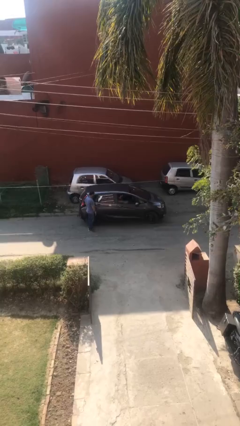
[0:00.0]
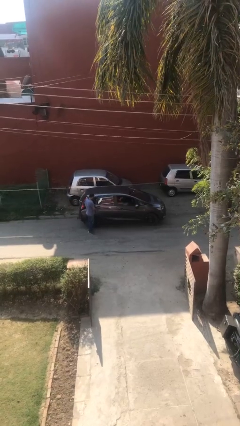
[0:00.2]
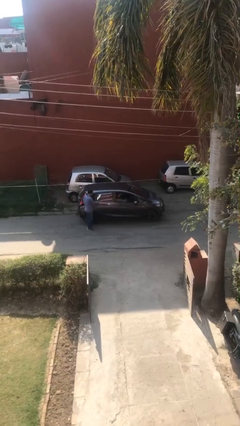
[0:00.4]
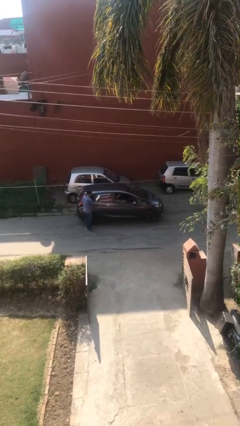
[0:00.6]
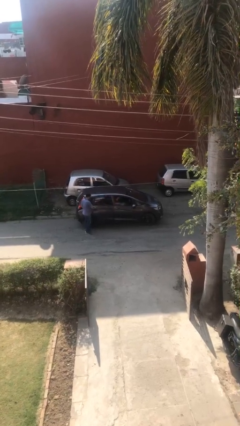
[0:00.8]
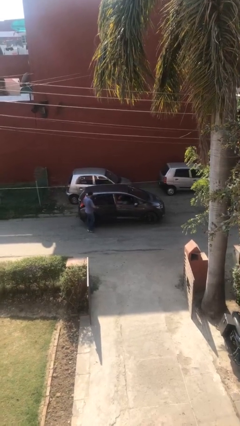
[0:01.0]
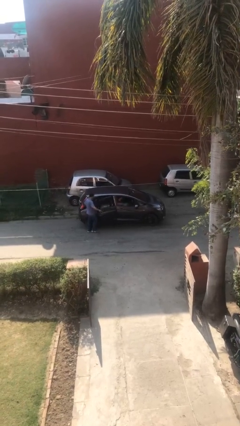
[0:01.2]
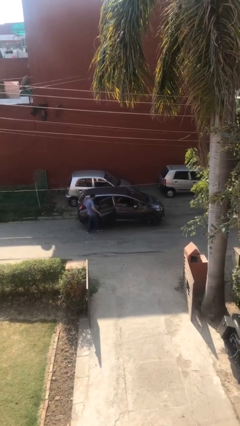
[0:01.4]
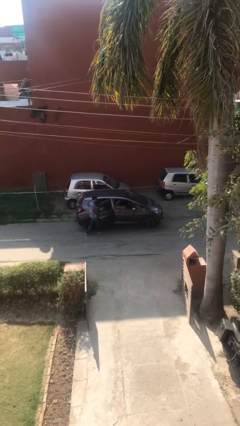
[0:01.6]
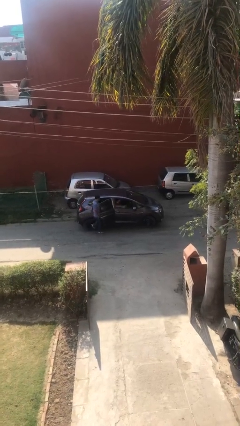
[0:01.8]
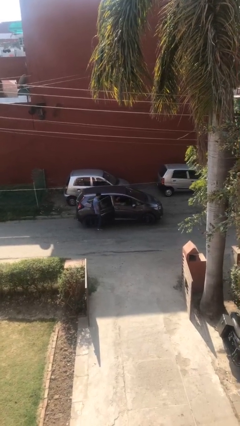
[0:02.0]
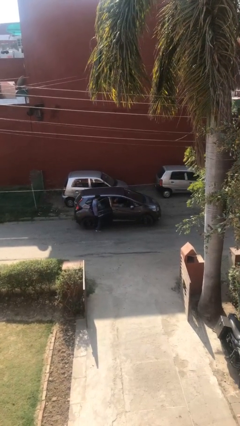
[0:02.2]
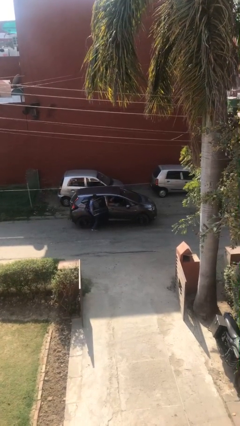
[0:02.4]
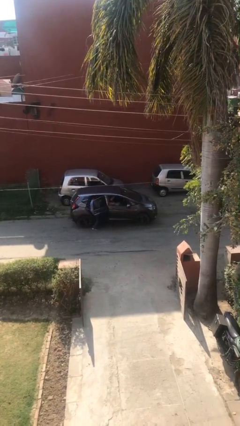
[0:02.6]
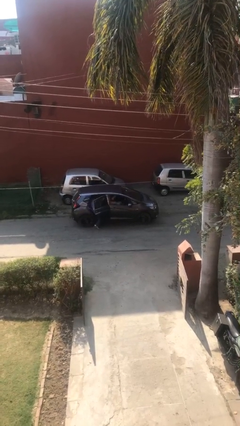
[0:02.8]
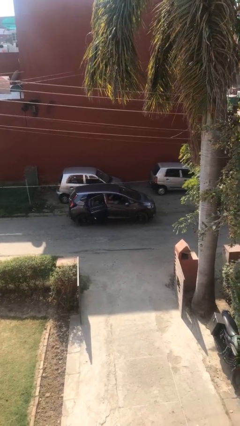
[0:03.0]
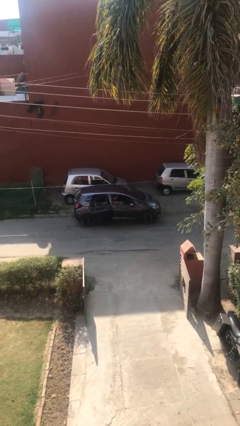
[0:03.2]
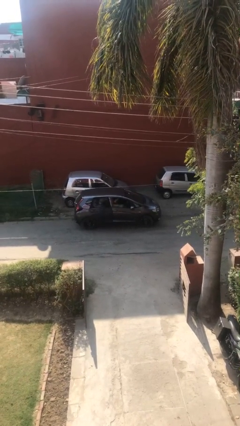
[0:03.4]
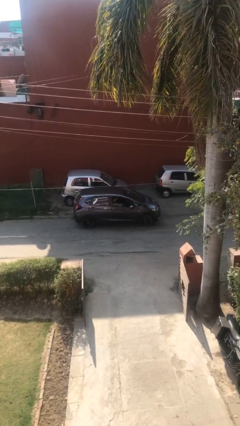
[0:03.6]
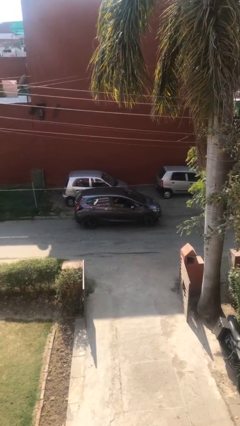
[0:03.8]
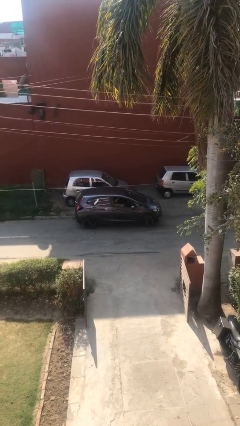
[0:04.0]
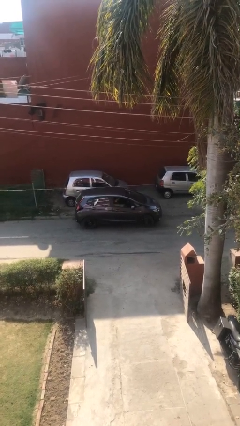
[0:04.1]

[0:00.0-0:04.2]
car picks up person

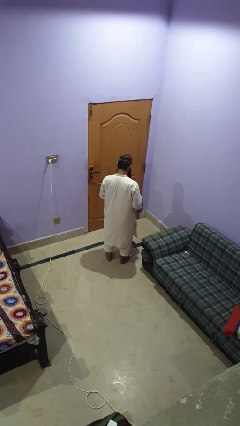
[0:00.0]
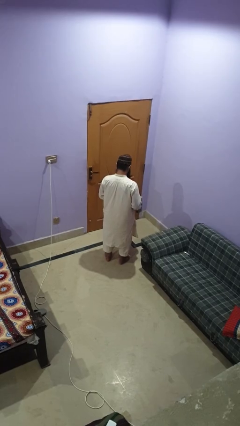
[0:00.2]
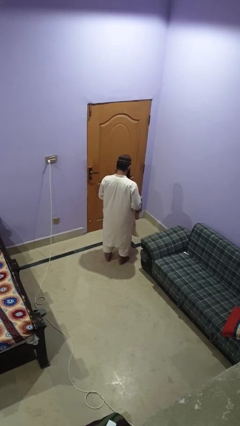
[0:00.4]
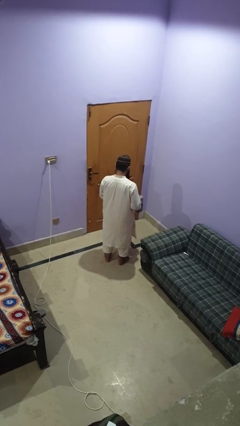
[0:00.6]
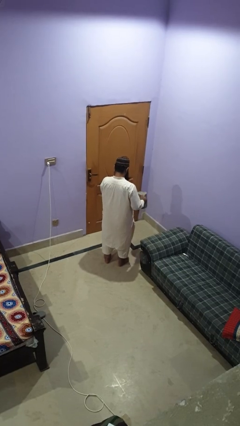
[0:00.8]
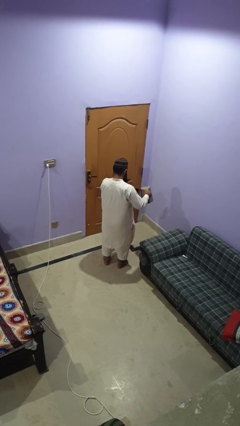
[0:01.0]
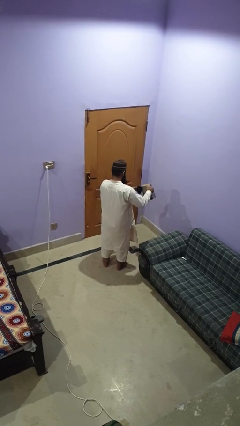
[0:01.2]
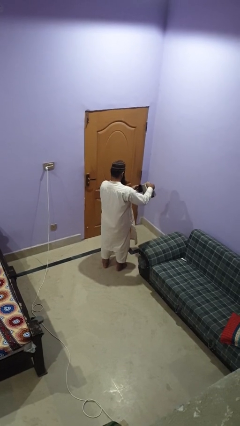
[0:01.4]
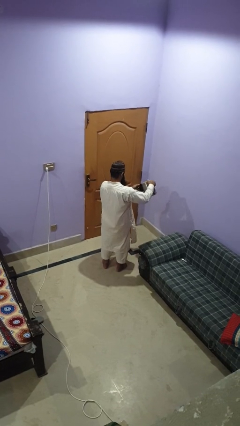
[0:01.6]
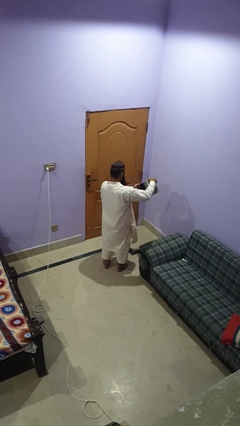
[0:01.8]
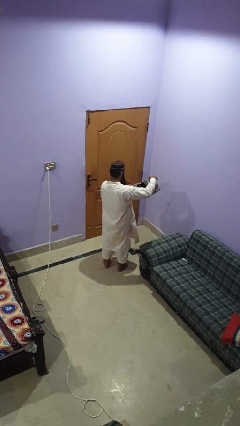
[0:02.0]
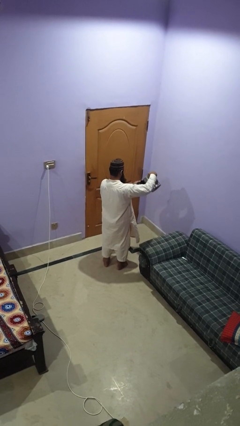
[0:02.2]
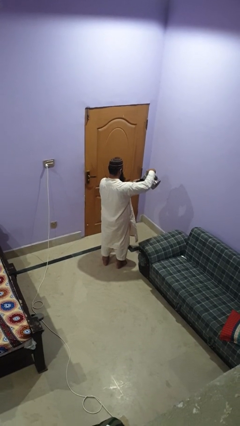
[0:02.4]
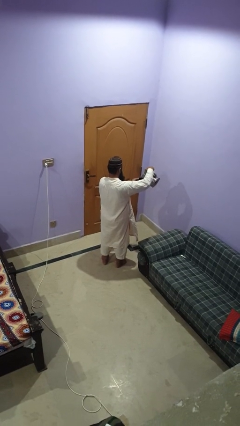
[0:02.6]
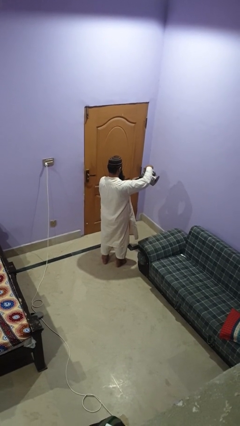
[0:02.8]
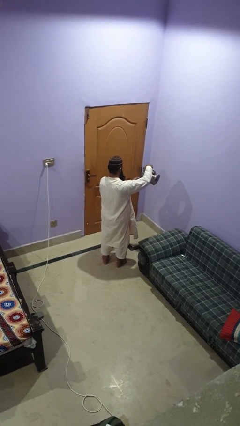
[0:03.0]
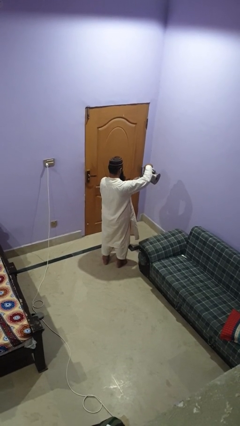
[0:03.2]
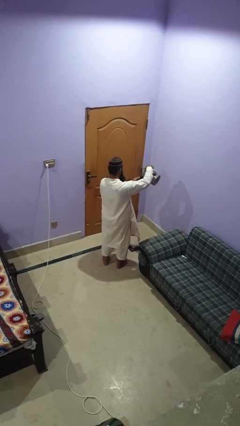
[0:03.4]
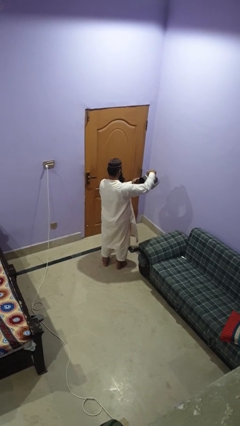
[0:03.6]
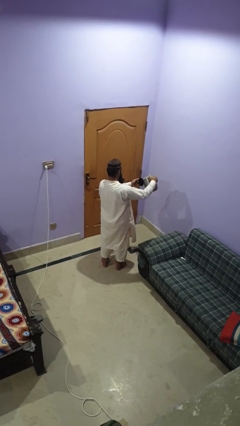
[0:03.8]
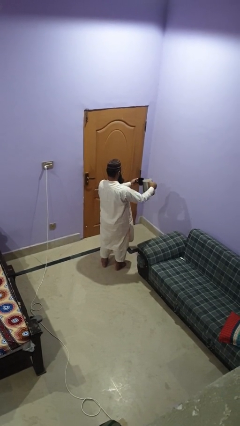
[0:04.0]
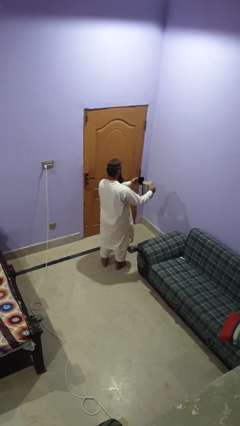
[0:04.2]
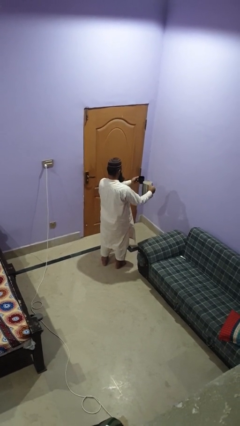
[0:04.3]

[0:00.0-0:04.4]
person pours coffee into mug

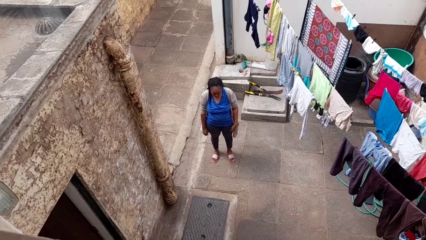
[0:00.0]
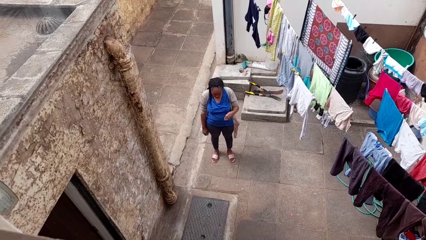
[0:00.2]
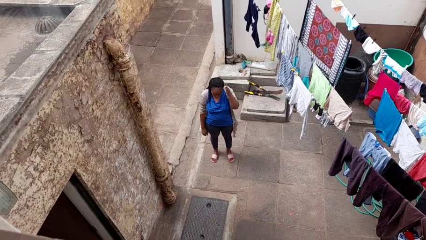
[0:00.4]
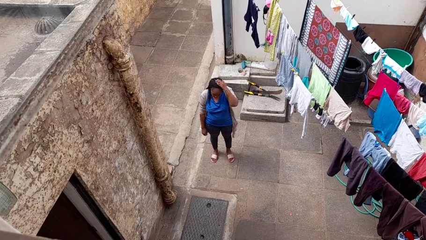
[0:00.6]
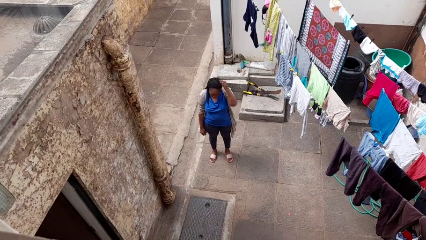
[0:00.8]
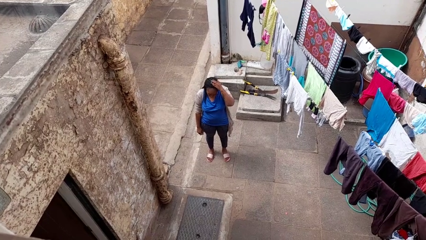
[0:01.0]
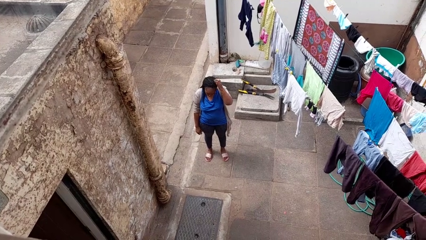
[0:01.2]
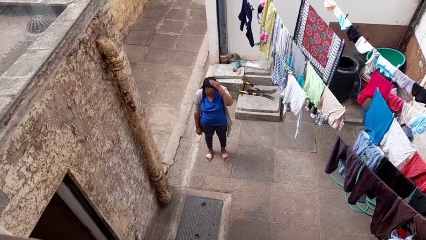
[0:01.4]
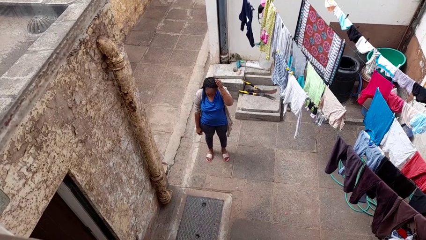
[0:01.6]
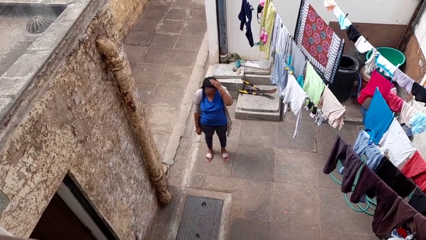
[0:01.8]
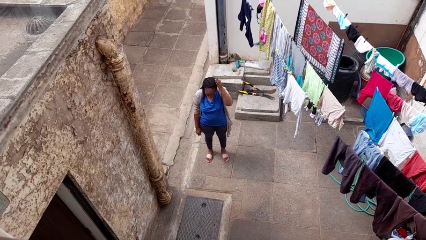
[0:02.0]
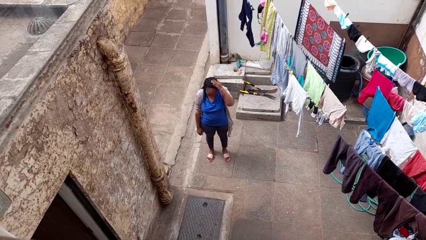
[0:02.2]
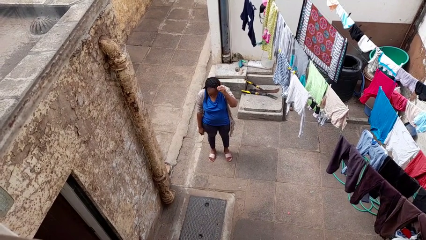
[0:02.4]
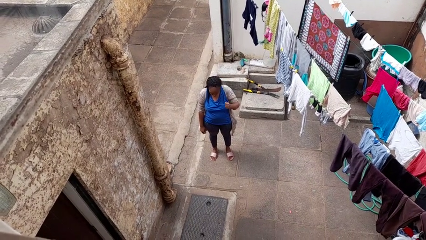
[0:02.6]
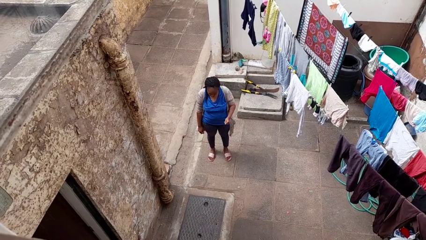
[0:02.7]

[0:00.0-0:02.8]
person pats head

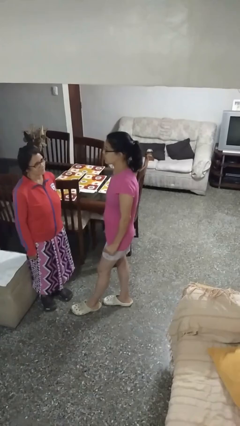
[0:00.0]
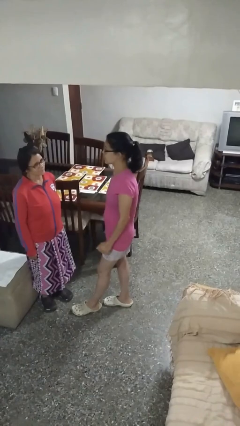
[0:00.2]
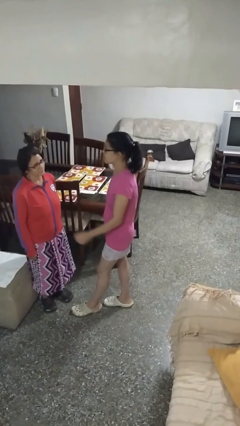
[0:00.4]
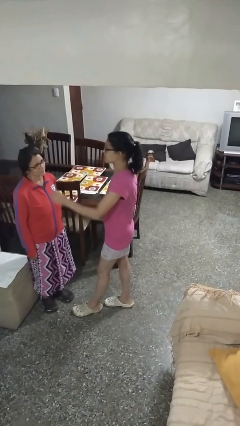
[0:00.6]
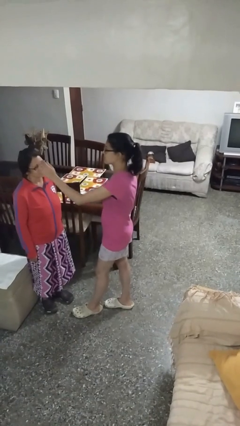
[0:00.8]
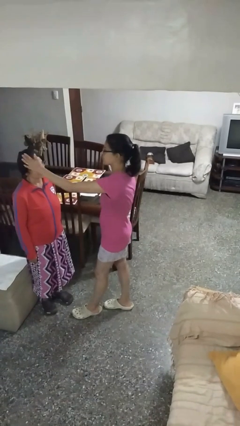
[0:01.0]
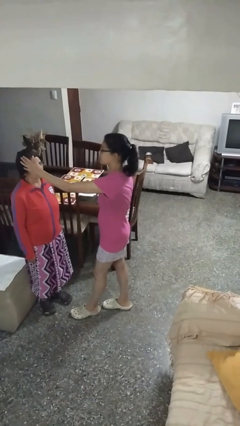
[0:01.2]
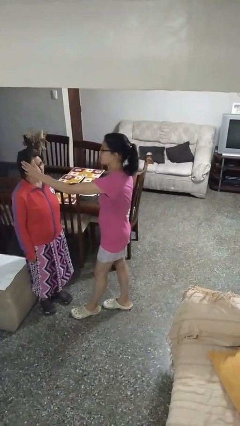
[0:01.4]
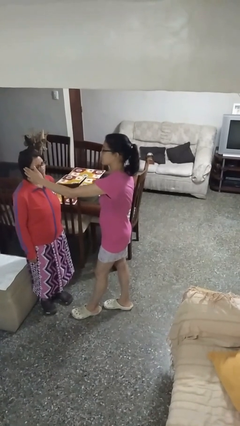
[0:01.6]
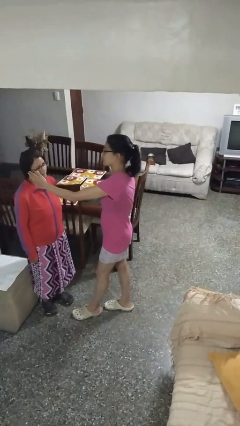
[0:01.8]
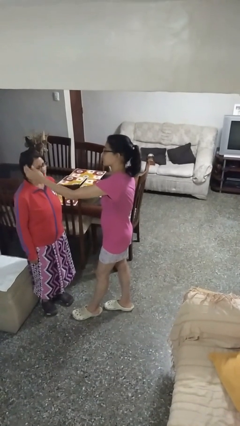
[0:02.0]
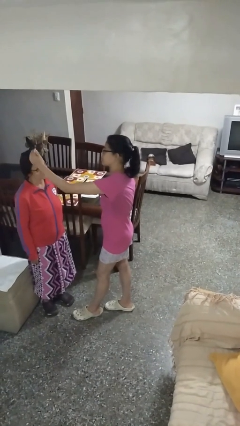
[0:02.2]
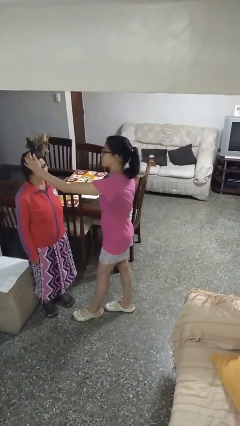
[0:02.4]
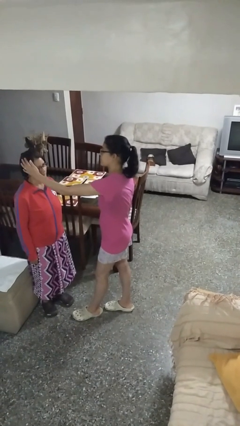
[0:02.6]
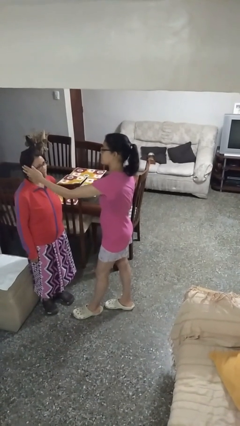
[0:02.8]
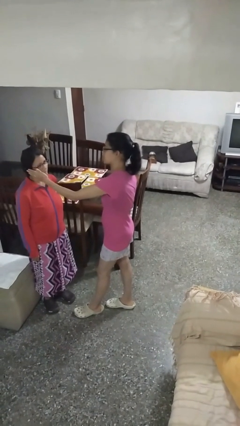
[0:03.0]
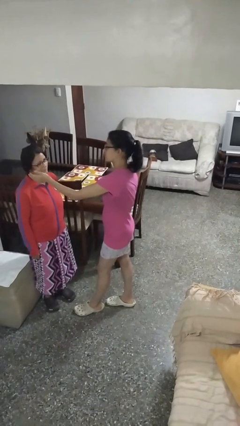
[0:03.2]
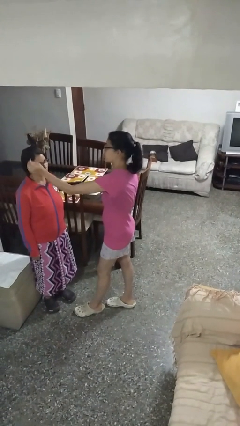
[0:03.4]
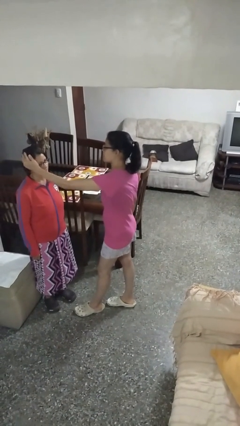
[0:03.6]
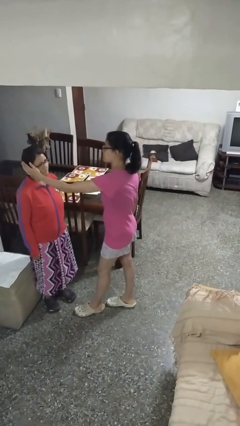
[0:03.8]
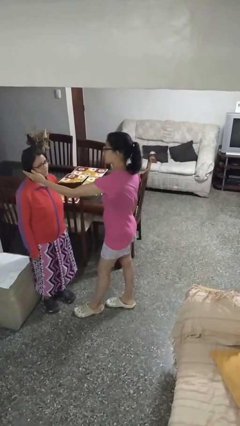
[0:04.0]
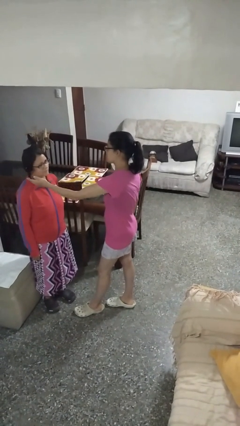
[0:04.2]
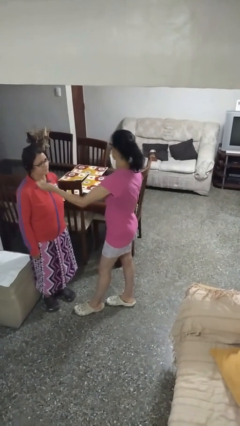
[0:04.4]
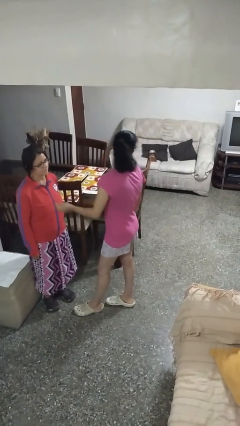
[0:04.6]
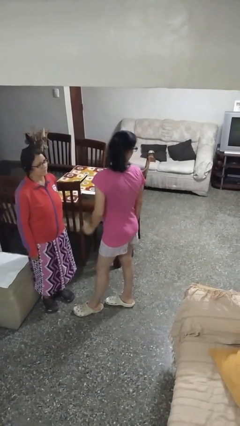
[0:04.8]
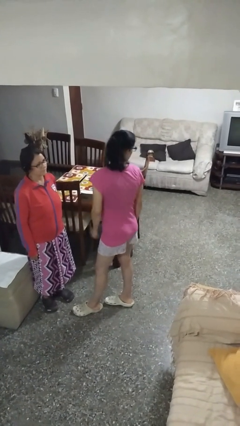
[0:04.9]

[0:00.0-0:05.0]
person touches face of person

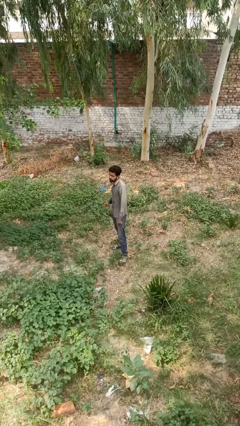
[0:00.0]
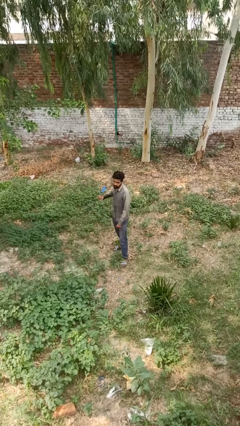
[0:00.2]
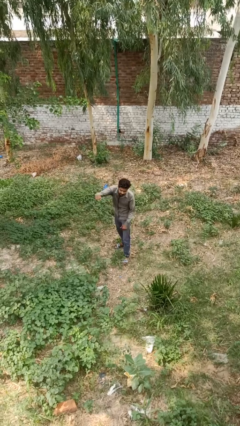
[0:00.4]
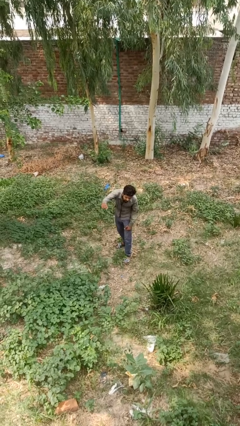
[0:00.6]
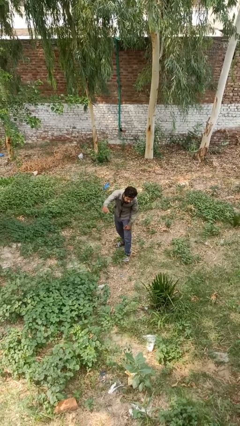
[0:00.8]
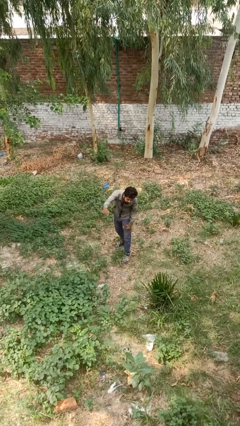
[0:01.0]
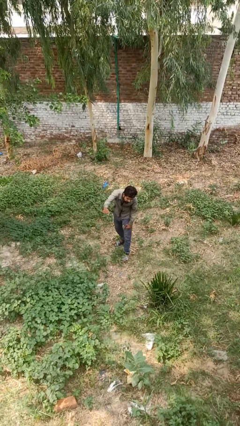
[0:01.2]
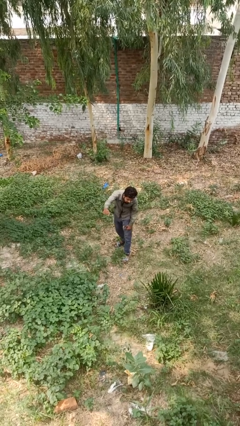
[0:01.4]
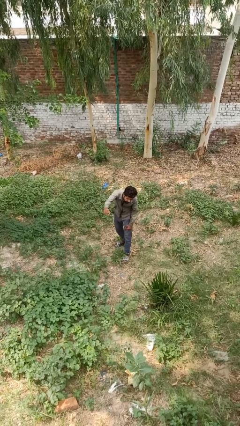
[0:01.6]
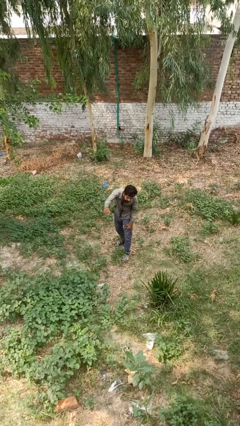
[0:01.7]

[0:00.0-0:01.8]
person punches
